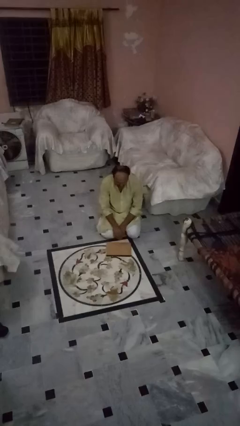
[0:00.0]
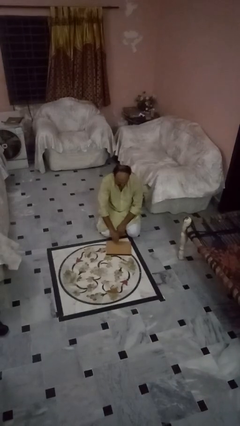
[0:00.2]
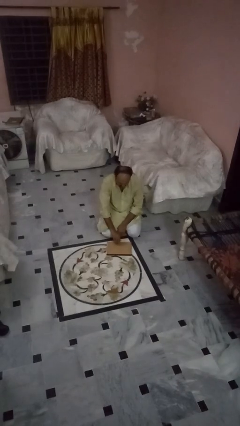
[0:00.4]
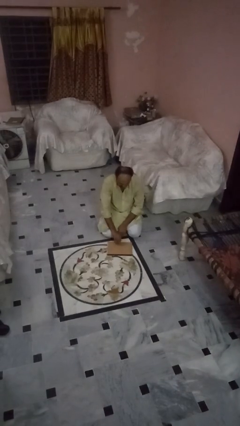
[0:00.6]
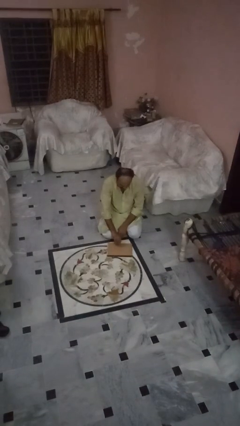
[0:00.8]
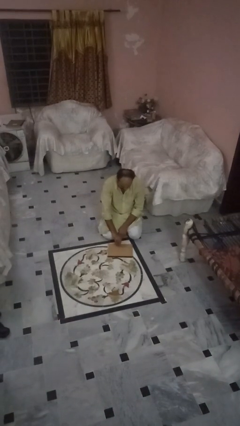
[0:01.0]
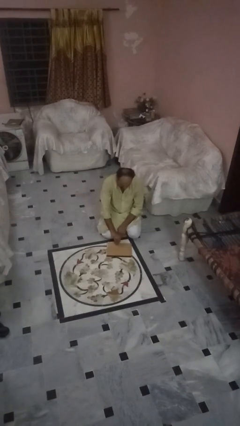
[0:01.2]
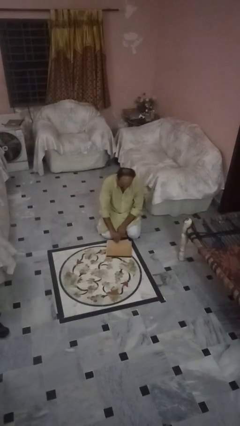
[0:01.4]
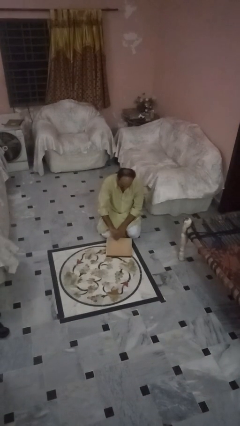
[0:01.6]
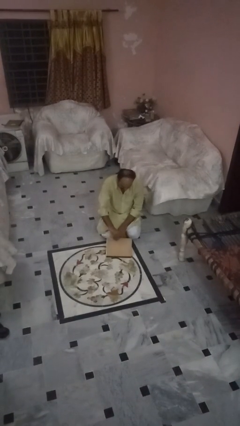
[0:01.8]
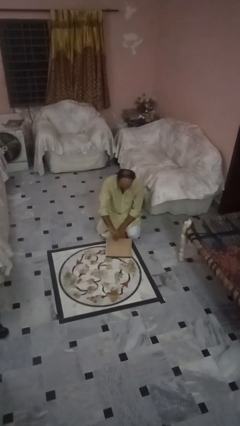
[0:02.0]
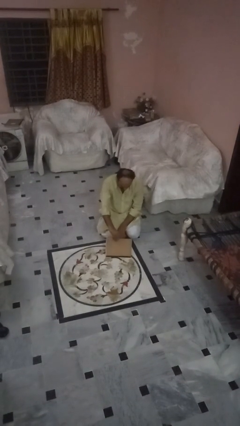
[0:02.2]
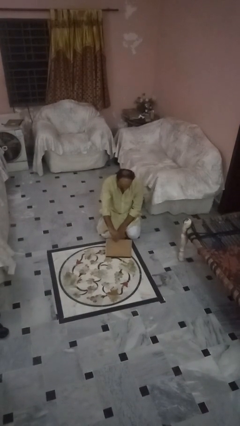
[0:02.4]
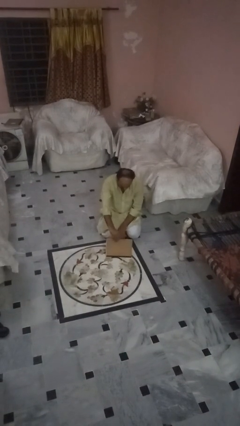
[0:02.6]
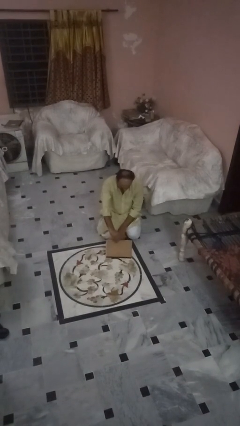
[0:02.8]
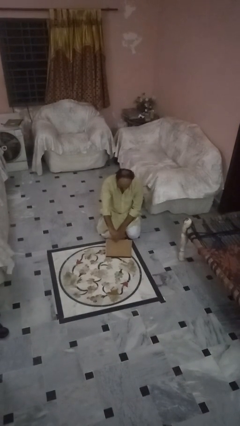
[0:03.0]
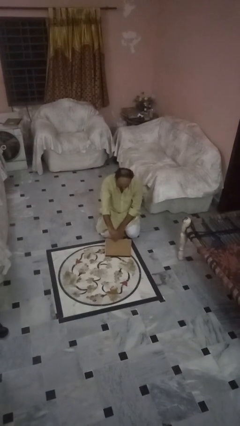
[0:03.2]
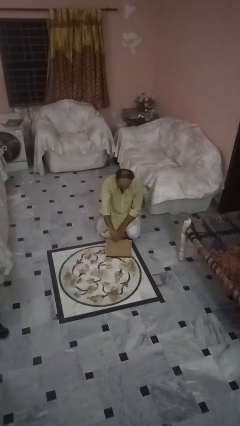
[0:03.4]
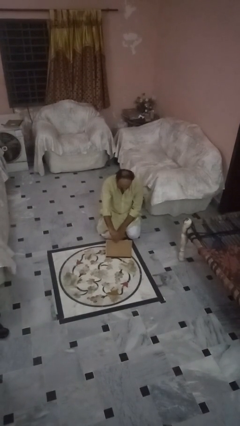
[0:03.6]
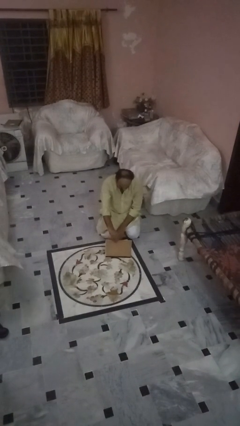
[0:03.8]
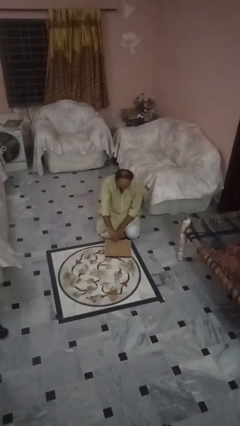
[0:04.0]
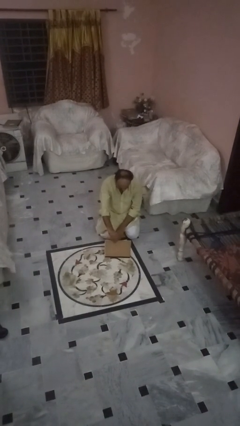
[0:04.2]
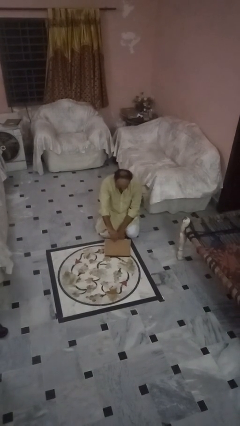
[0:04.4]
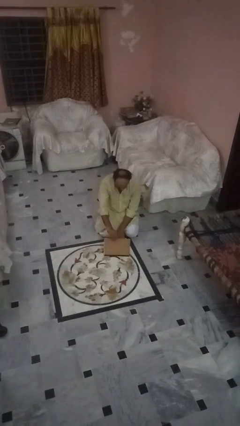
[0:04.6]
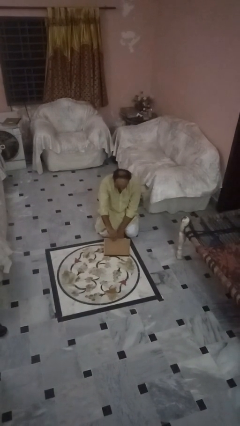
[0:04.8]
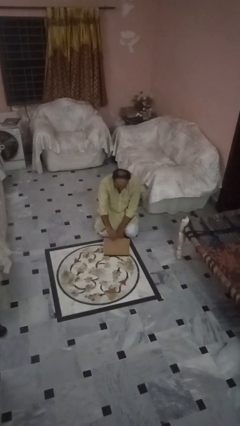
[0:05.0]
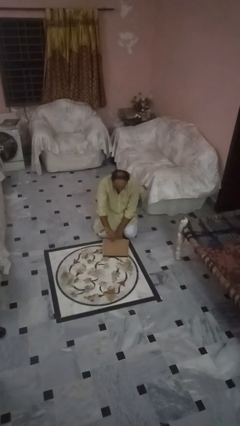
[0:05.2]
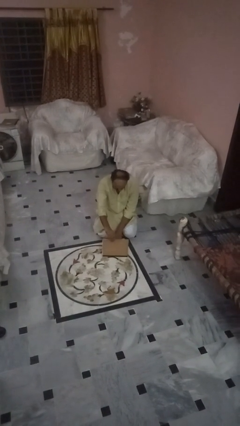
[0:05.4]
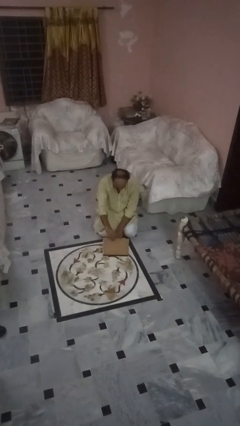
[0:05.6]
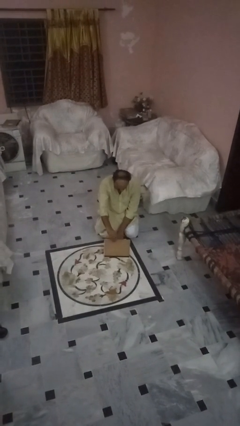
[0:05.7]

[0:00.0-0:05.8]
person opens laptop

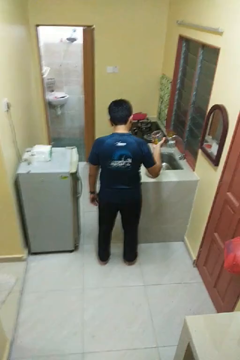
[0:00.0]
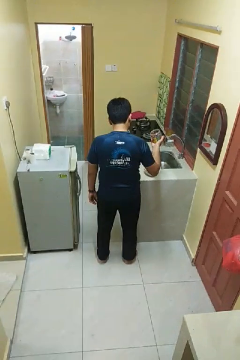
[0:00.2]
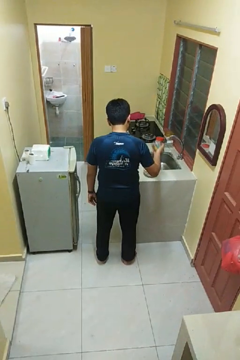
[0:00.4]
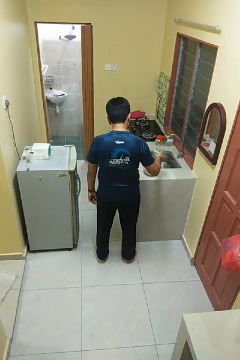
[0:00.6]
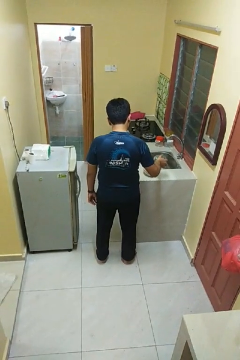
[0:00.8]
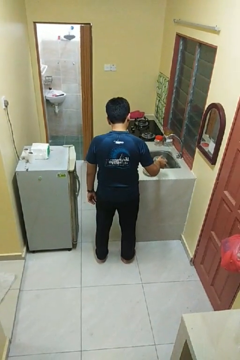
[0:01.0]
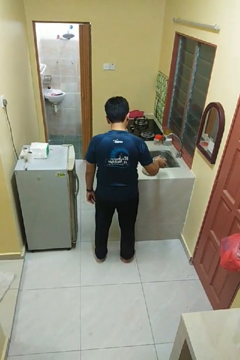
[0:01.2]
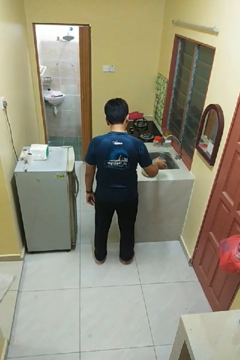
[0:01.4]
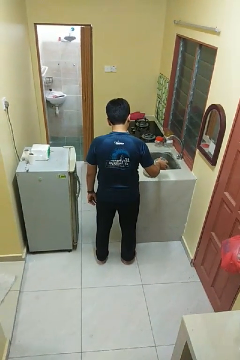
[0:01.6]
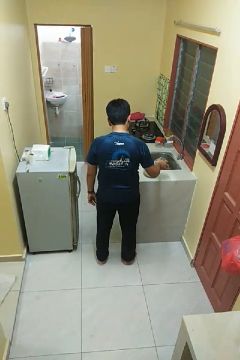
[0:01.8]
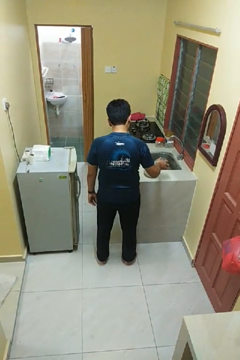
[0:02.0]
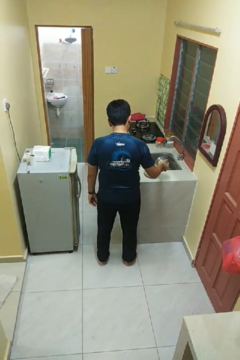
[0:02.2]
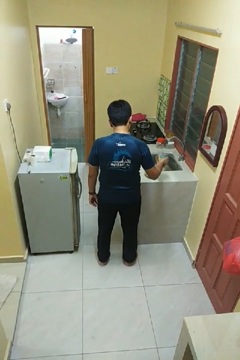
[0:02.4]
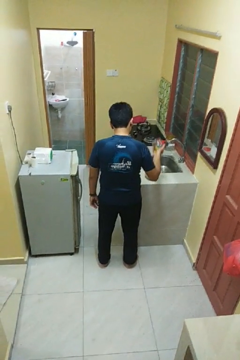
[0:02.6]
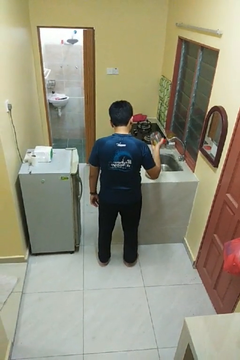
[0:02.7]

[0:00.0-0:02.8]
person pours into bowl

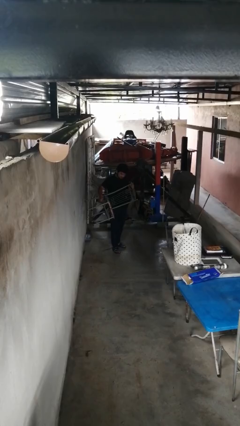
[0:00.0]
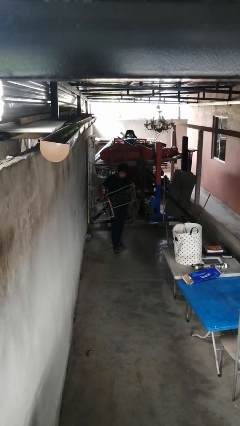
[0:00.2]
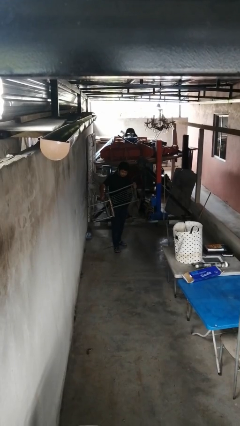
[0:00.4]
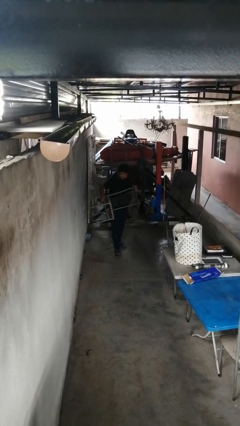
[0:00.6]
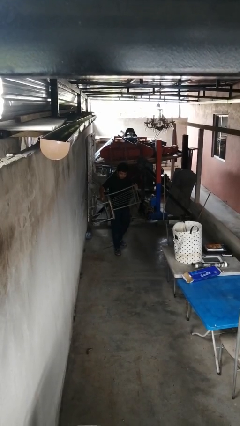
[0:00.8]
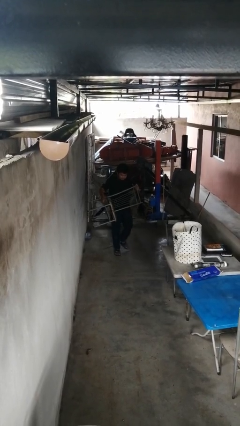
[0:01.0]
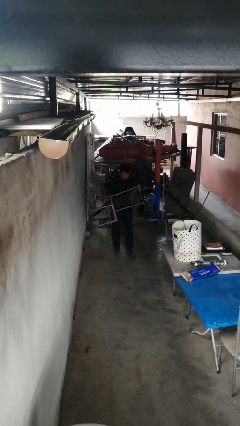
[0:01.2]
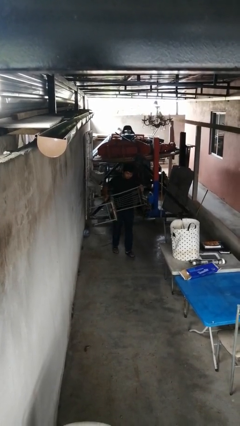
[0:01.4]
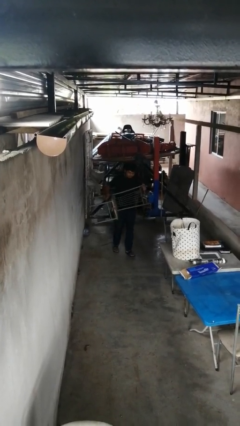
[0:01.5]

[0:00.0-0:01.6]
person carries furniture

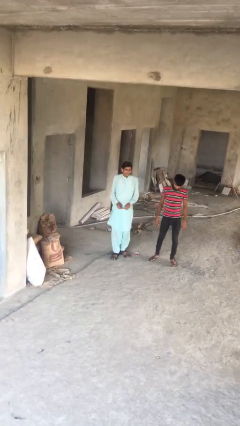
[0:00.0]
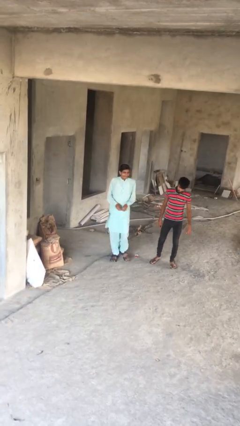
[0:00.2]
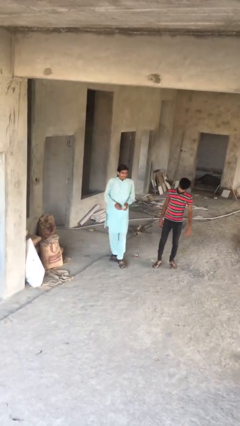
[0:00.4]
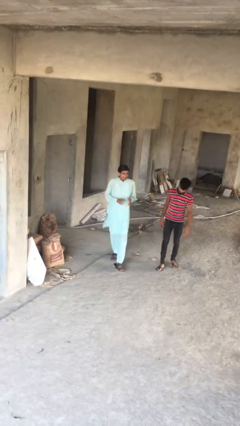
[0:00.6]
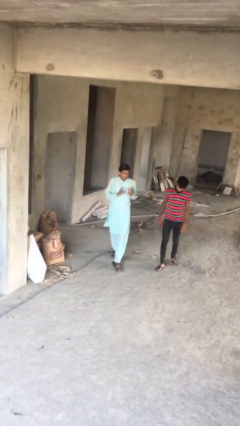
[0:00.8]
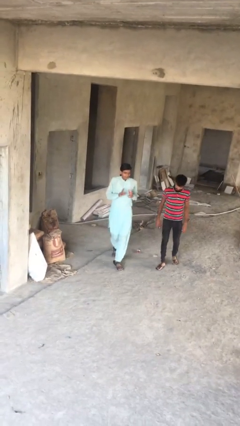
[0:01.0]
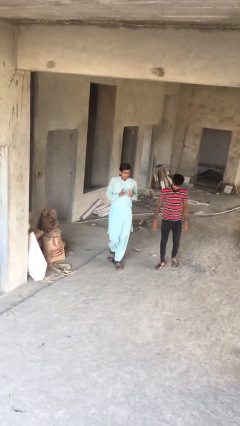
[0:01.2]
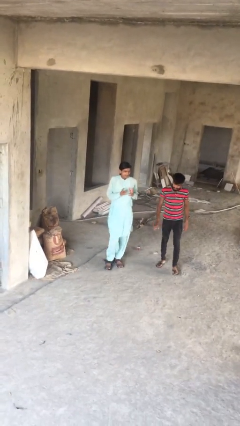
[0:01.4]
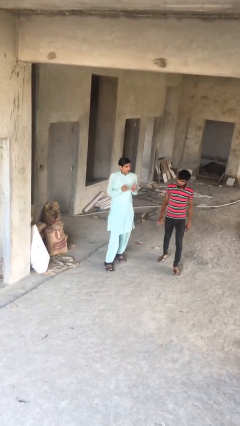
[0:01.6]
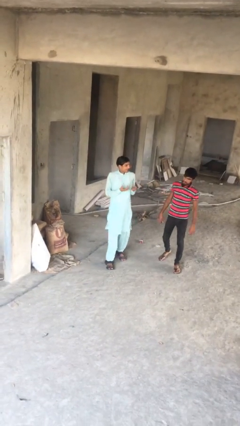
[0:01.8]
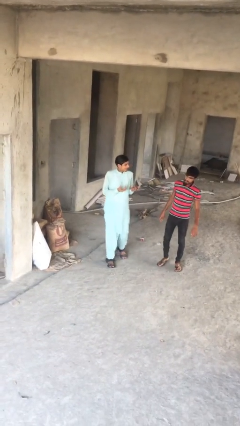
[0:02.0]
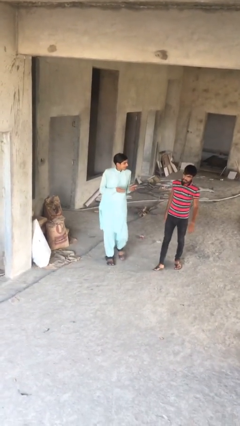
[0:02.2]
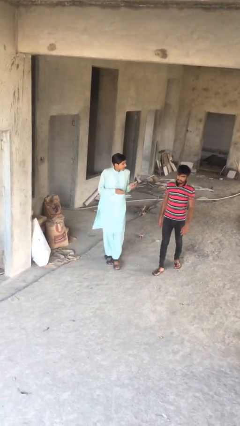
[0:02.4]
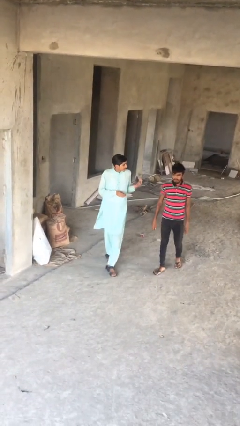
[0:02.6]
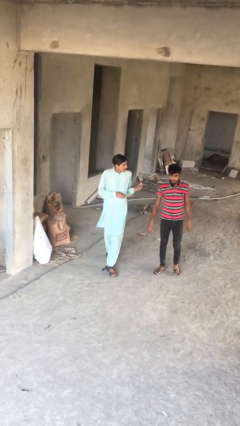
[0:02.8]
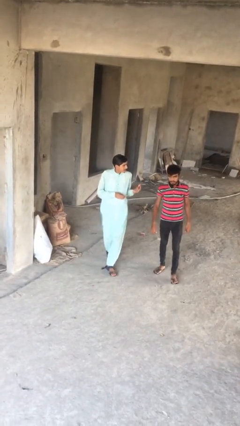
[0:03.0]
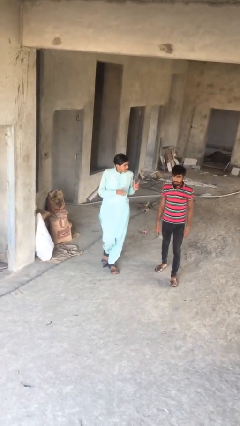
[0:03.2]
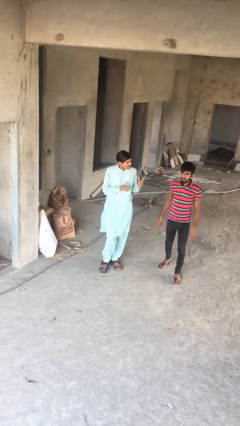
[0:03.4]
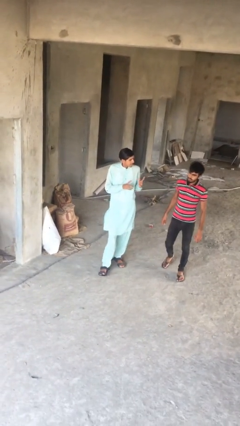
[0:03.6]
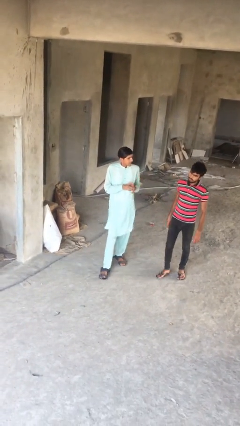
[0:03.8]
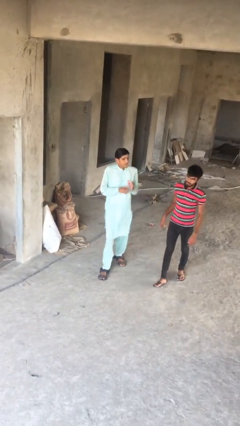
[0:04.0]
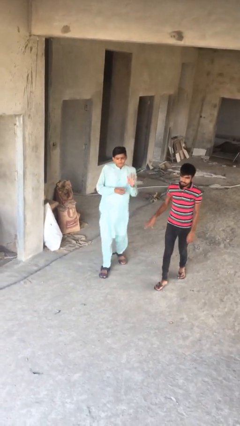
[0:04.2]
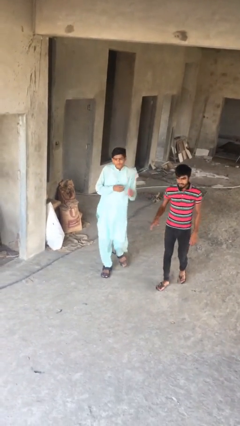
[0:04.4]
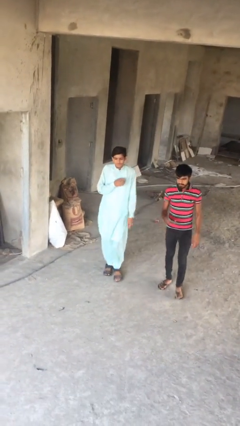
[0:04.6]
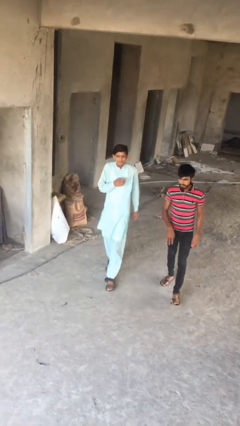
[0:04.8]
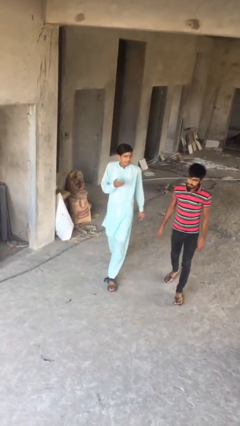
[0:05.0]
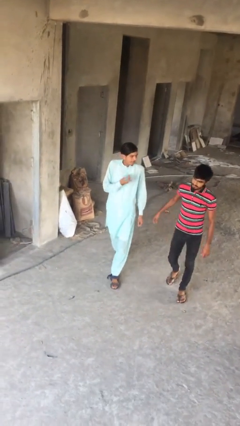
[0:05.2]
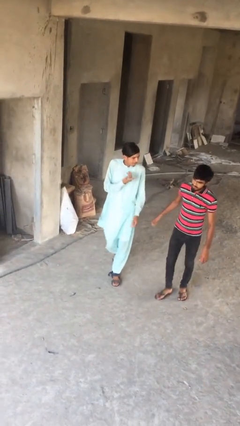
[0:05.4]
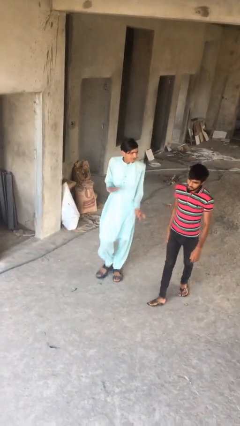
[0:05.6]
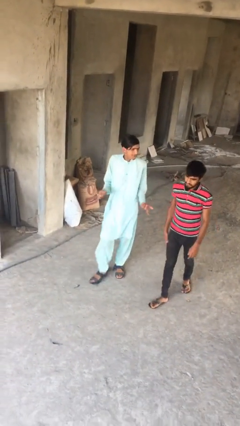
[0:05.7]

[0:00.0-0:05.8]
person talks to person

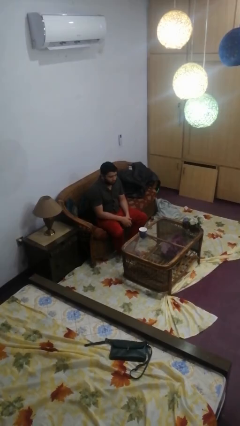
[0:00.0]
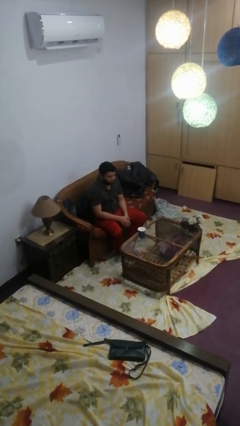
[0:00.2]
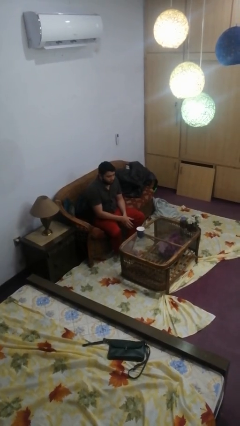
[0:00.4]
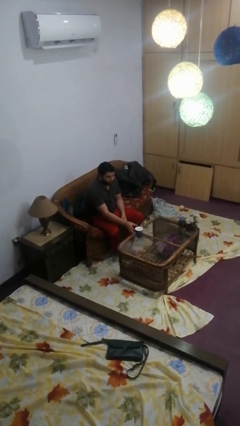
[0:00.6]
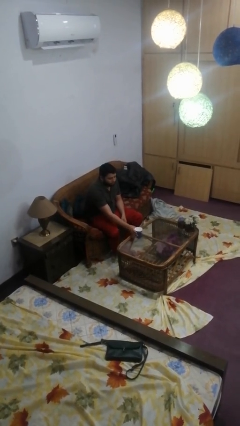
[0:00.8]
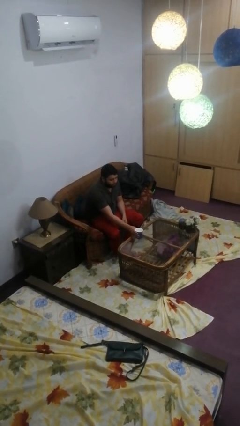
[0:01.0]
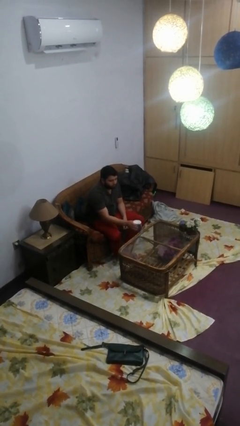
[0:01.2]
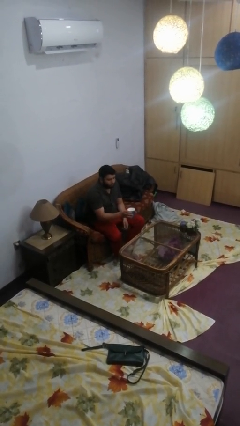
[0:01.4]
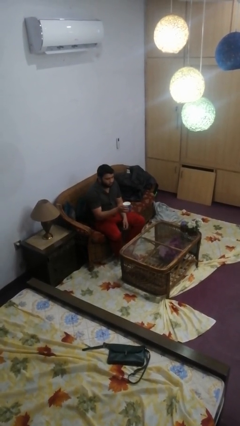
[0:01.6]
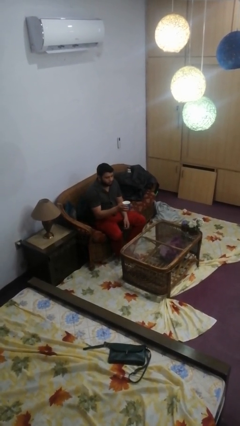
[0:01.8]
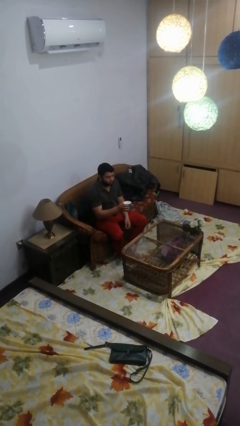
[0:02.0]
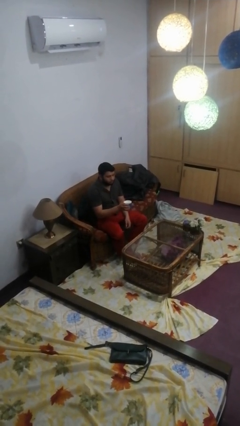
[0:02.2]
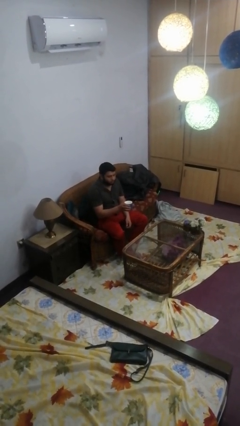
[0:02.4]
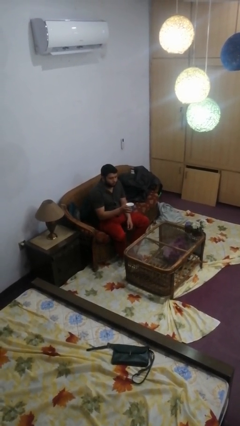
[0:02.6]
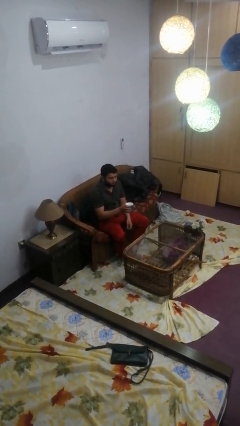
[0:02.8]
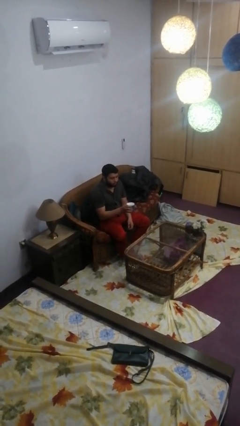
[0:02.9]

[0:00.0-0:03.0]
person picks up object from table
